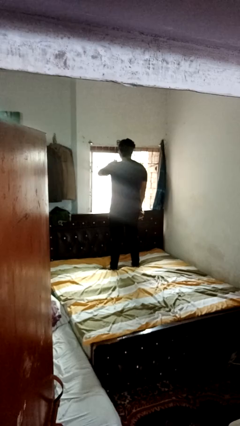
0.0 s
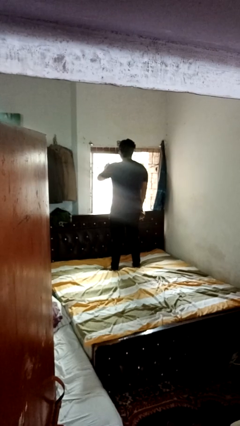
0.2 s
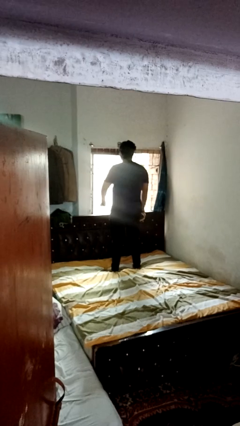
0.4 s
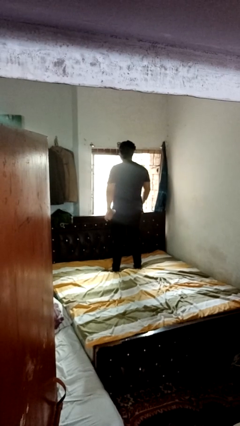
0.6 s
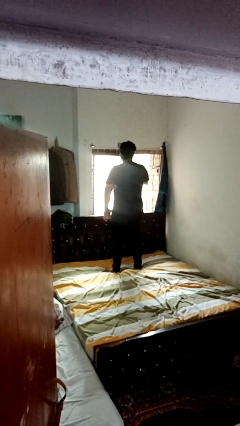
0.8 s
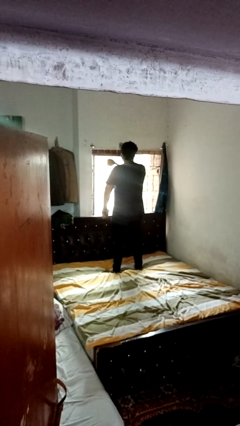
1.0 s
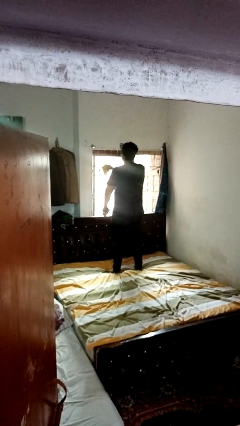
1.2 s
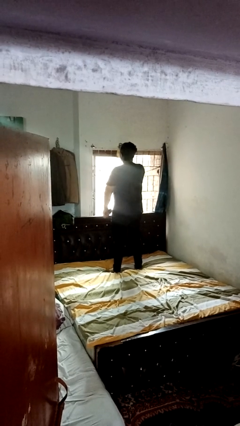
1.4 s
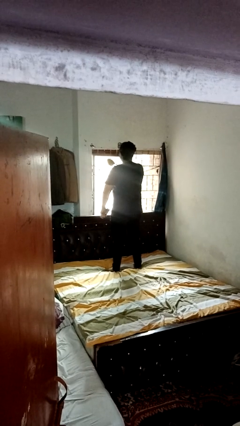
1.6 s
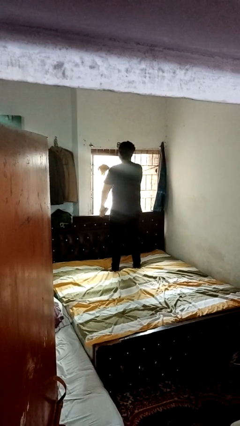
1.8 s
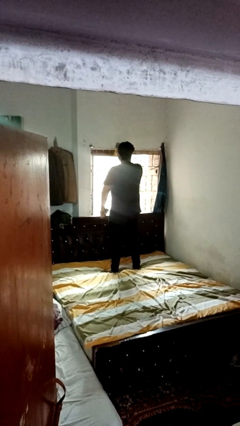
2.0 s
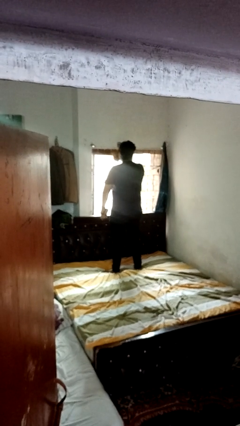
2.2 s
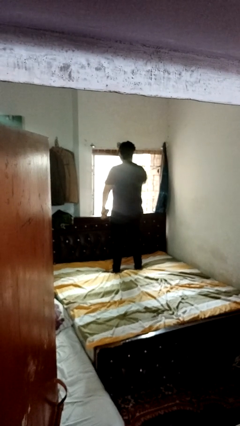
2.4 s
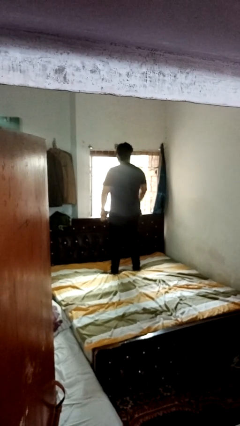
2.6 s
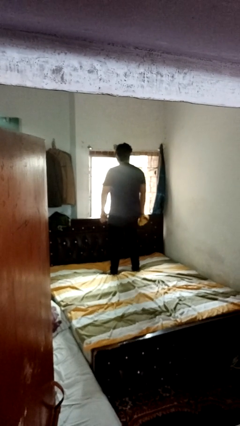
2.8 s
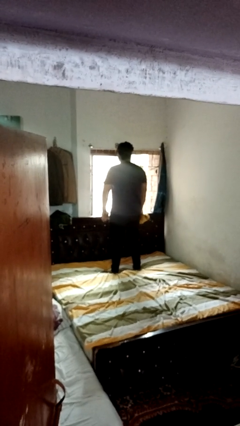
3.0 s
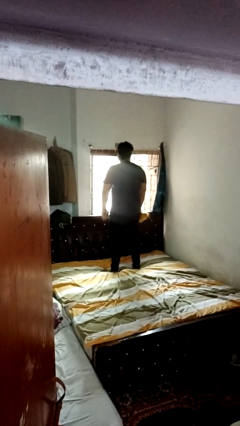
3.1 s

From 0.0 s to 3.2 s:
person washes window

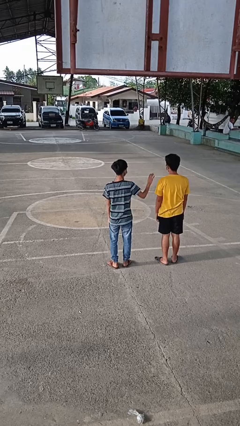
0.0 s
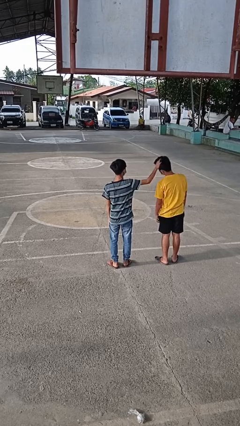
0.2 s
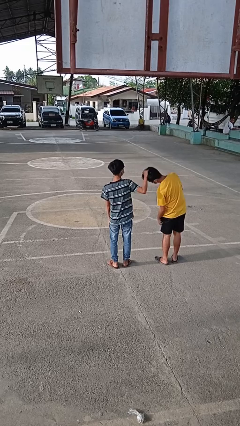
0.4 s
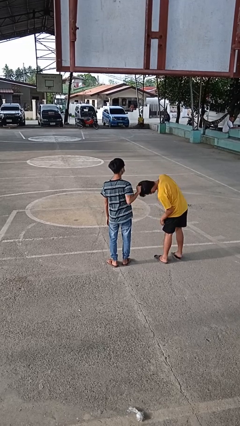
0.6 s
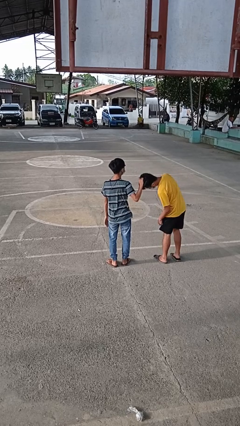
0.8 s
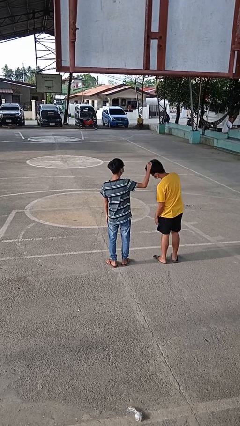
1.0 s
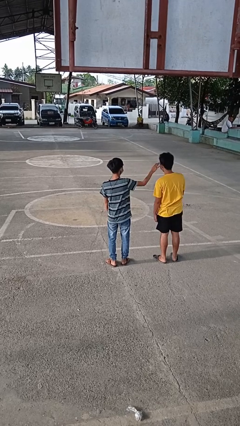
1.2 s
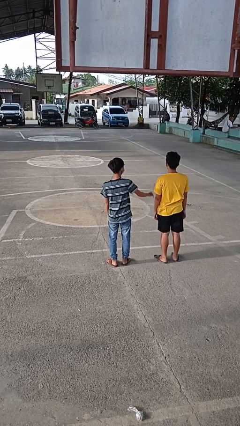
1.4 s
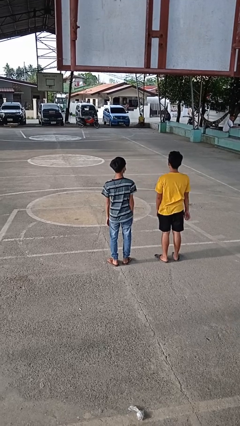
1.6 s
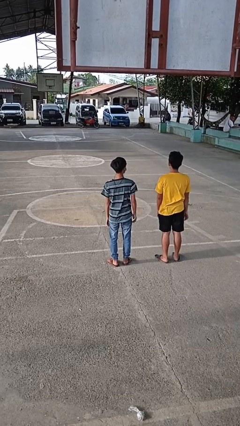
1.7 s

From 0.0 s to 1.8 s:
person grabs person by hair

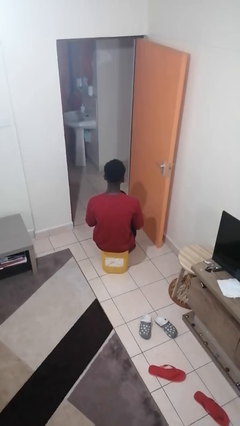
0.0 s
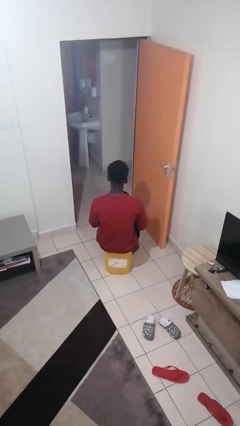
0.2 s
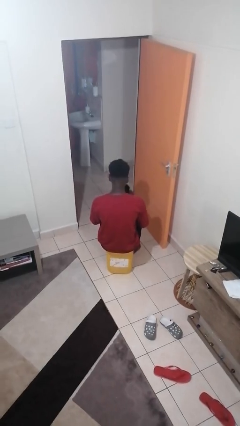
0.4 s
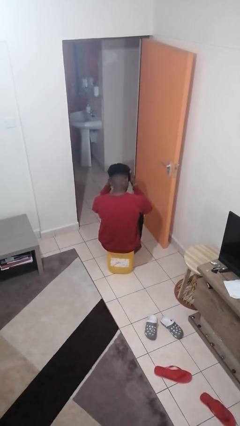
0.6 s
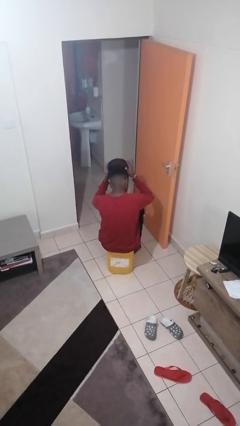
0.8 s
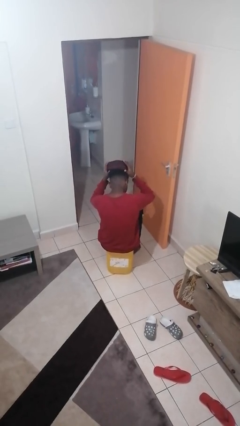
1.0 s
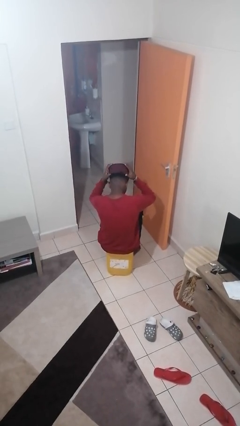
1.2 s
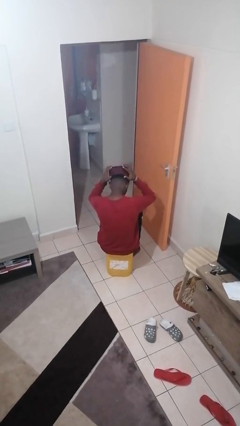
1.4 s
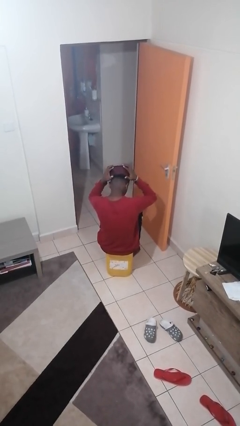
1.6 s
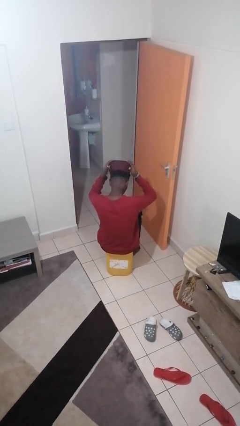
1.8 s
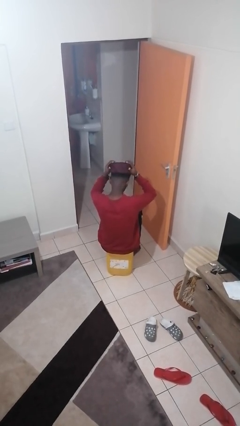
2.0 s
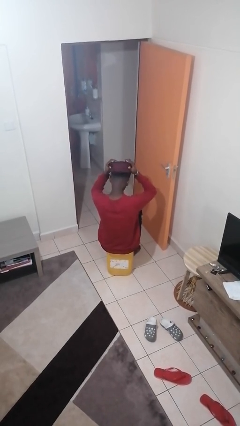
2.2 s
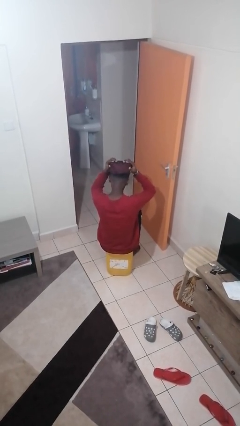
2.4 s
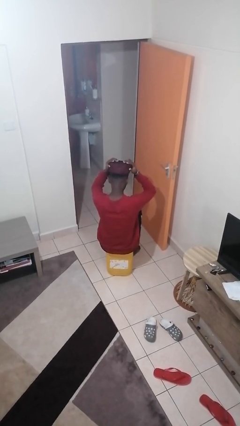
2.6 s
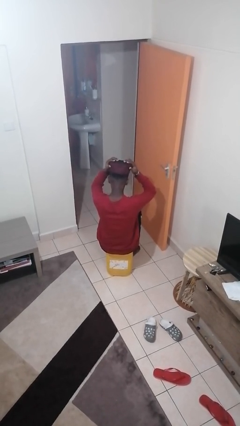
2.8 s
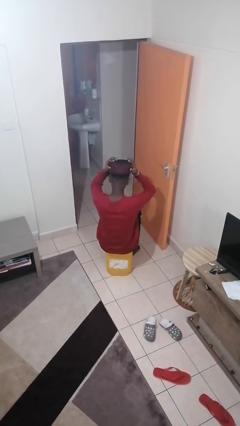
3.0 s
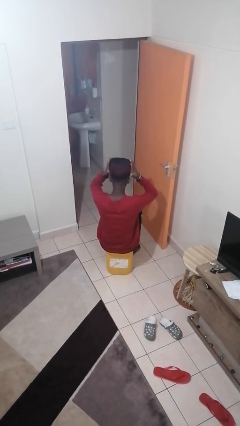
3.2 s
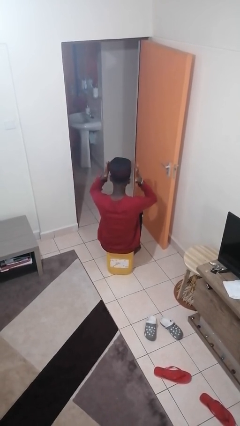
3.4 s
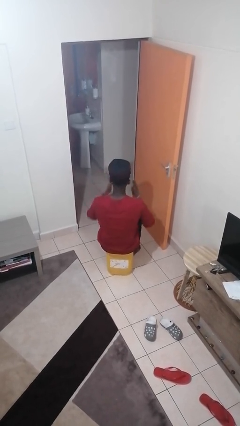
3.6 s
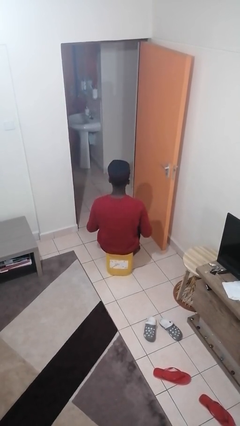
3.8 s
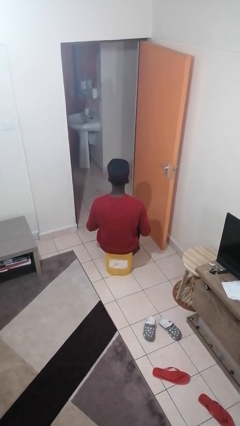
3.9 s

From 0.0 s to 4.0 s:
person puts on hat

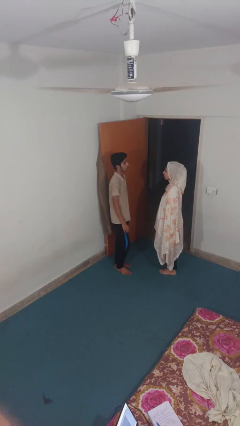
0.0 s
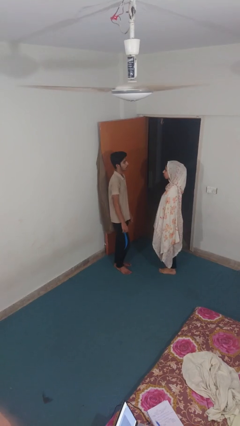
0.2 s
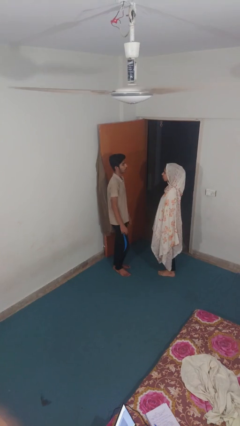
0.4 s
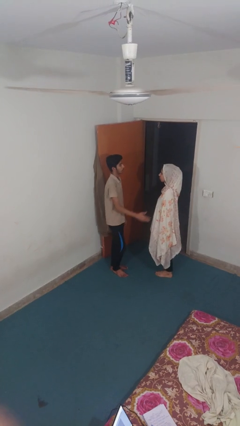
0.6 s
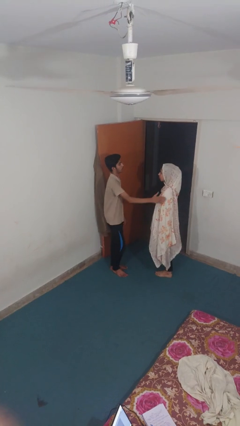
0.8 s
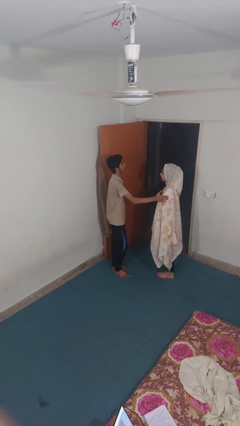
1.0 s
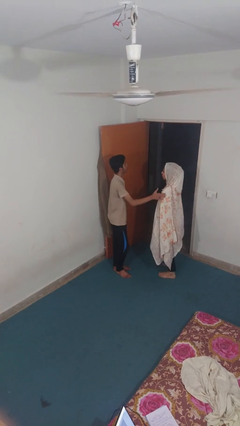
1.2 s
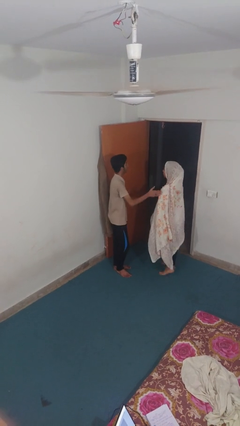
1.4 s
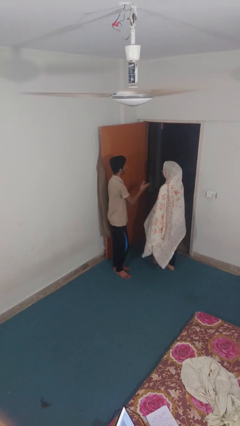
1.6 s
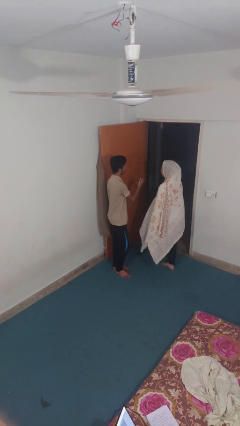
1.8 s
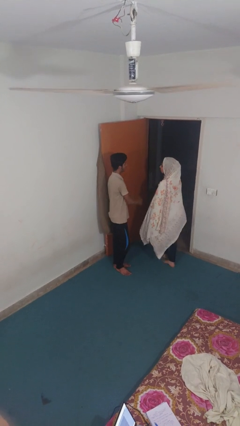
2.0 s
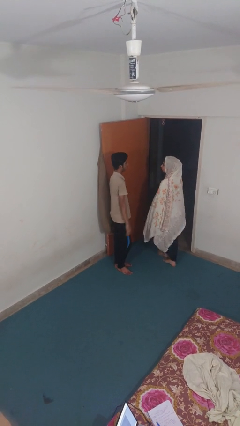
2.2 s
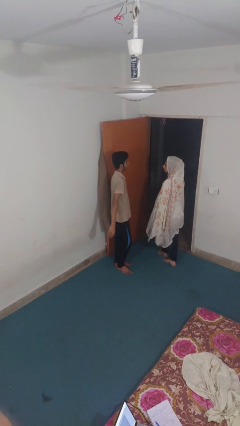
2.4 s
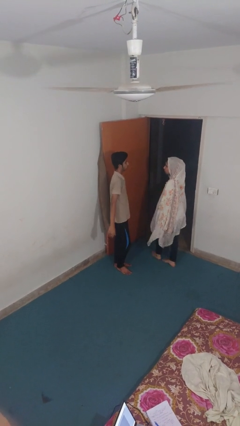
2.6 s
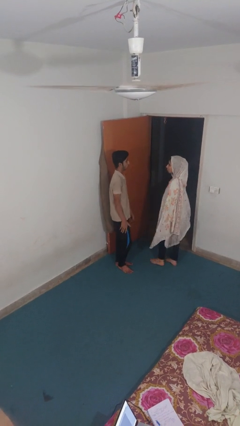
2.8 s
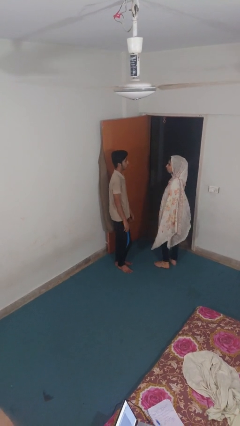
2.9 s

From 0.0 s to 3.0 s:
person shoves person

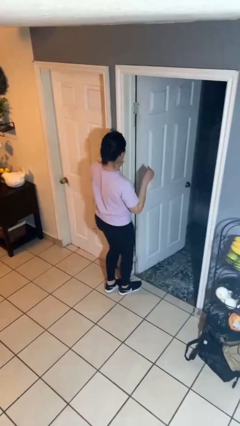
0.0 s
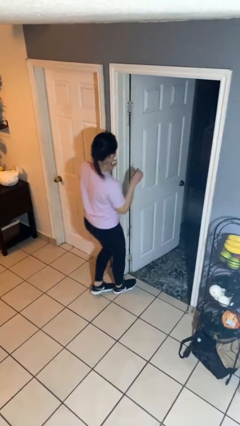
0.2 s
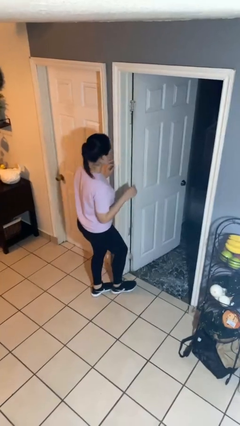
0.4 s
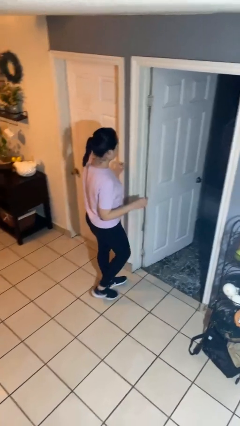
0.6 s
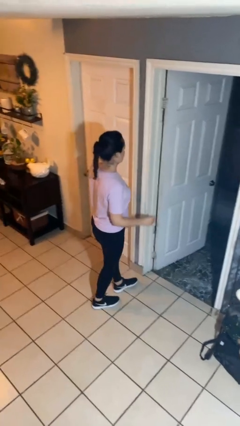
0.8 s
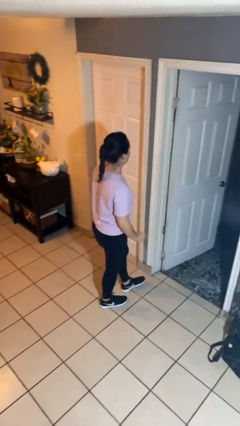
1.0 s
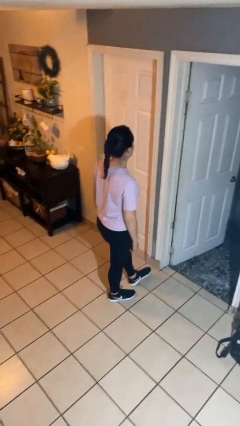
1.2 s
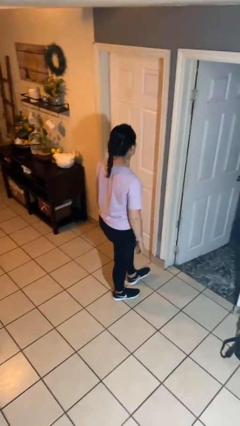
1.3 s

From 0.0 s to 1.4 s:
person bumps into wall

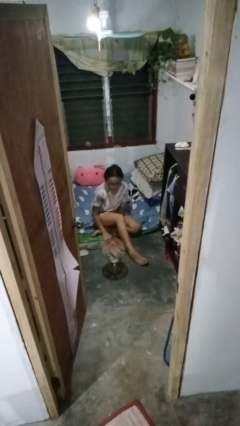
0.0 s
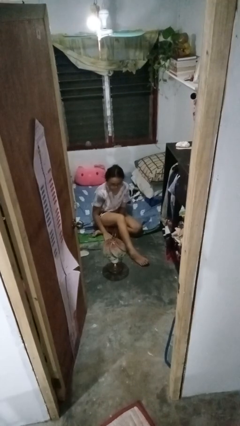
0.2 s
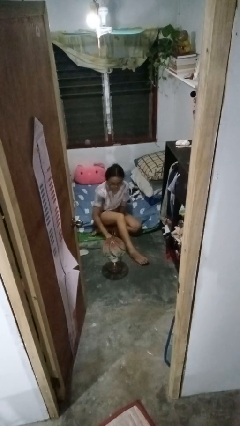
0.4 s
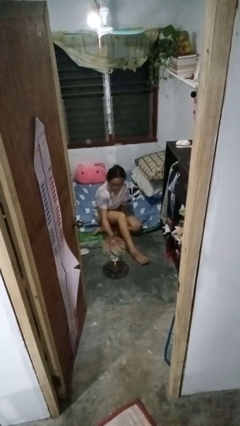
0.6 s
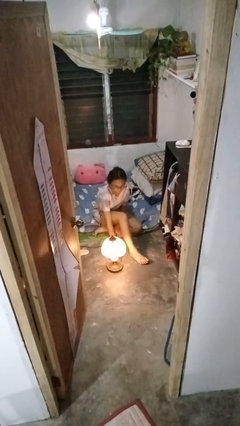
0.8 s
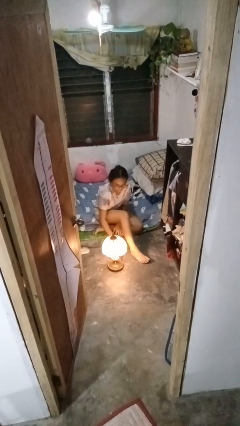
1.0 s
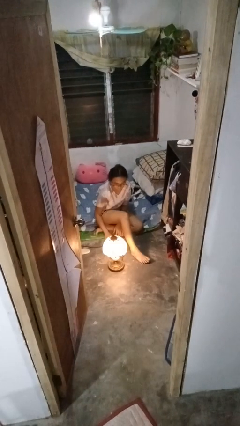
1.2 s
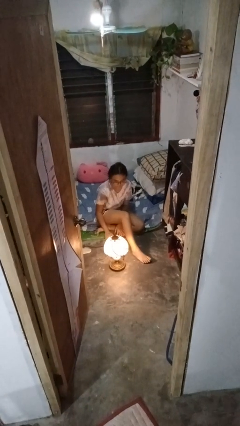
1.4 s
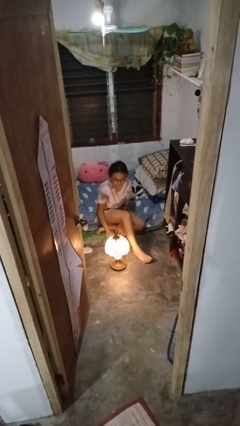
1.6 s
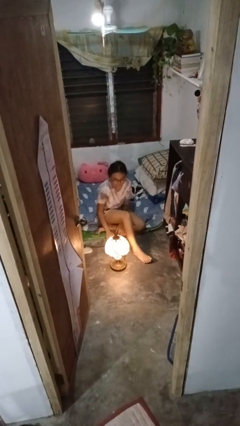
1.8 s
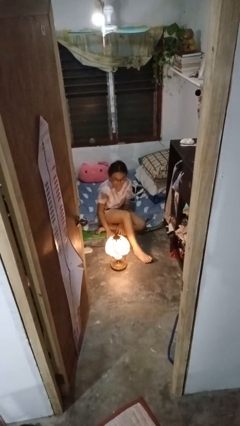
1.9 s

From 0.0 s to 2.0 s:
person turns on lamp

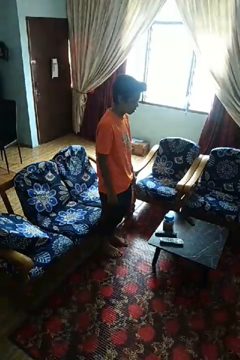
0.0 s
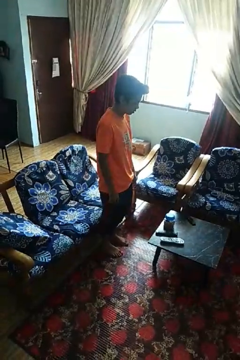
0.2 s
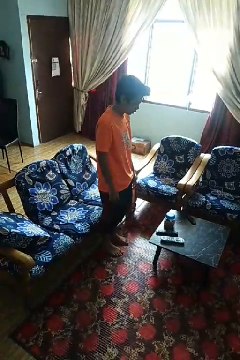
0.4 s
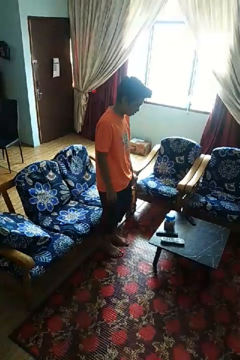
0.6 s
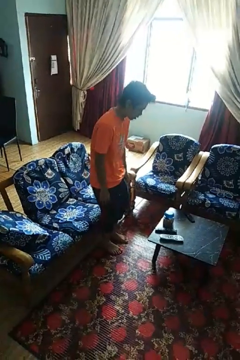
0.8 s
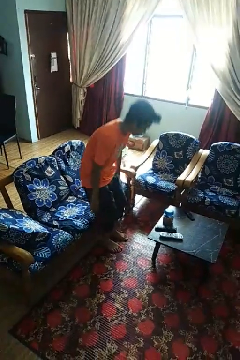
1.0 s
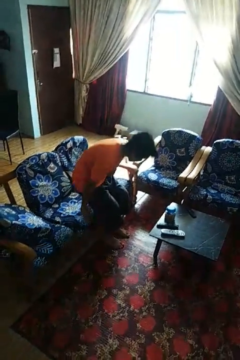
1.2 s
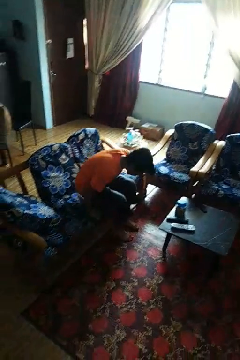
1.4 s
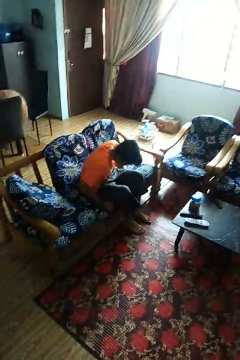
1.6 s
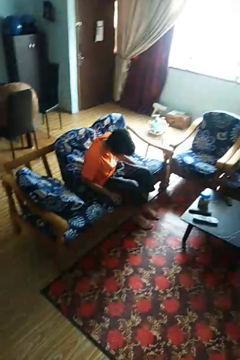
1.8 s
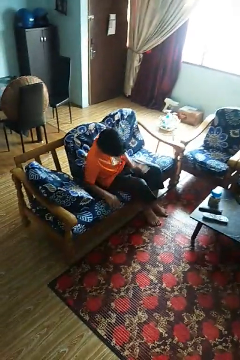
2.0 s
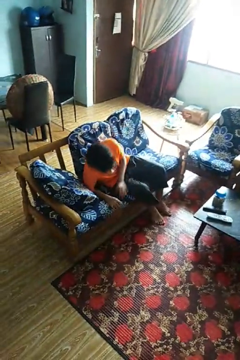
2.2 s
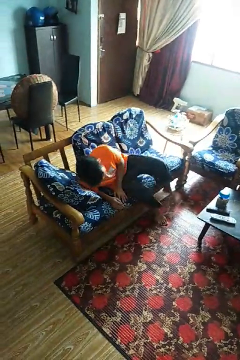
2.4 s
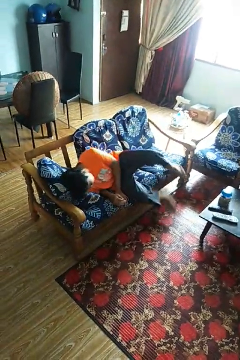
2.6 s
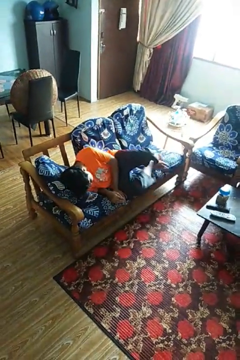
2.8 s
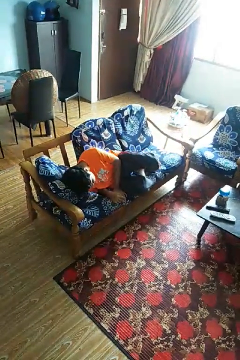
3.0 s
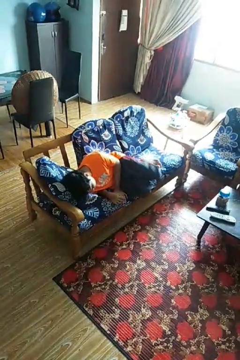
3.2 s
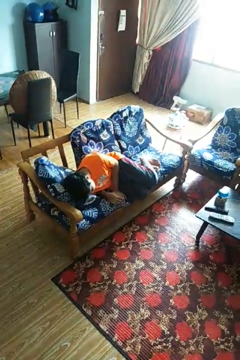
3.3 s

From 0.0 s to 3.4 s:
person lies down on couch
